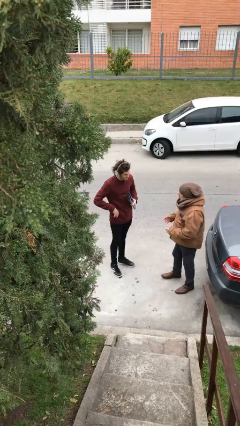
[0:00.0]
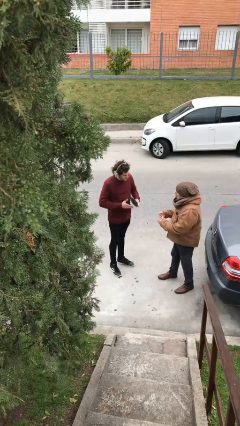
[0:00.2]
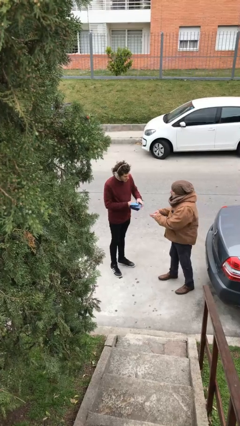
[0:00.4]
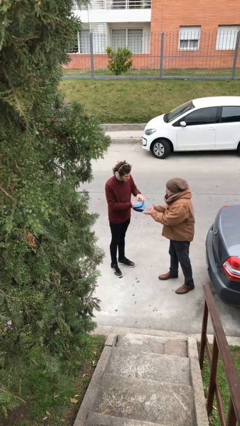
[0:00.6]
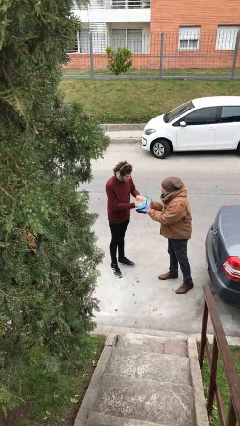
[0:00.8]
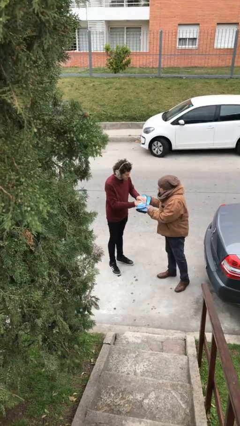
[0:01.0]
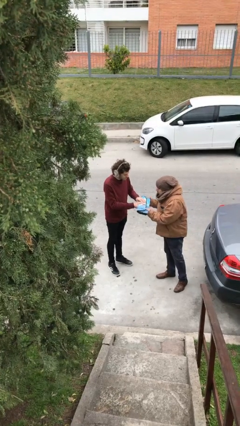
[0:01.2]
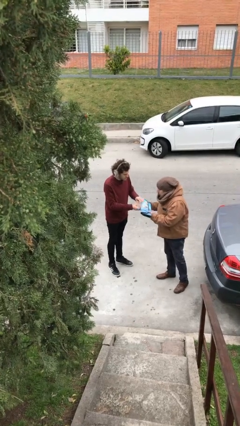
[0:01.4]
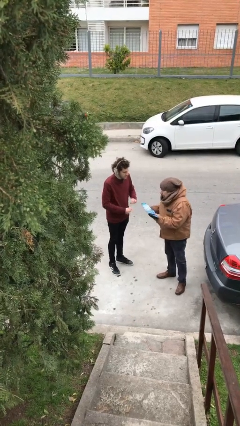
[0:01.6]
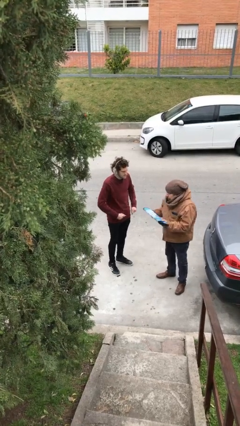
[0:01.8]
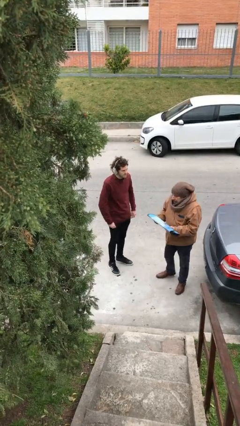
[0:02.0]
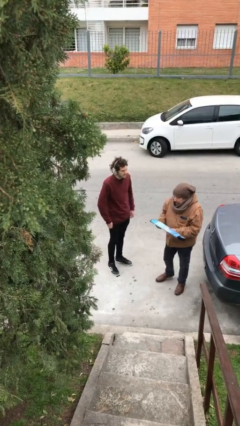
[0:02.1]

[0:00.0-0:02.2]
person transfers object to person

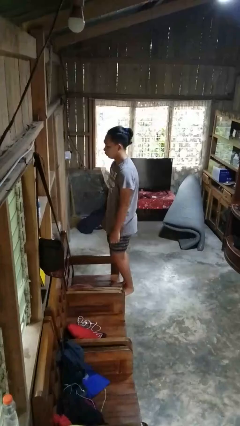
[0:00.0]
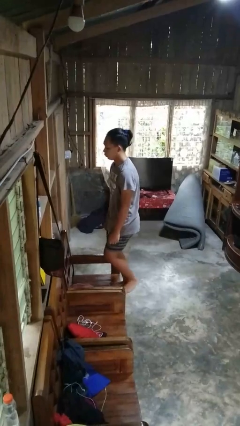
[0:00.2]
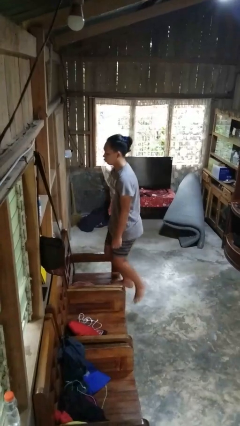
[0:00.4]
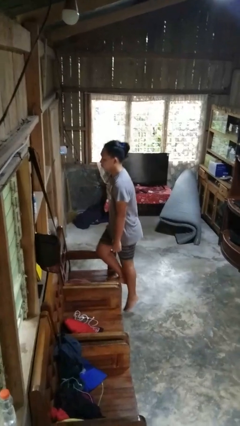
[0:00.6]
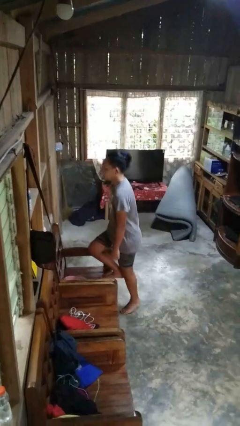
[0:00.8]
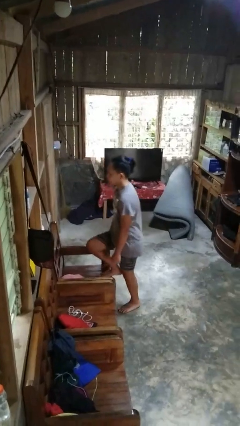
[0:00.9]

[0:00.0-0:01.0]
person climbs off chair

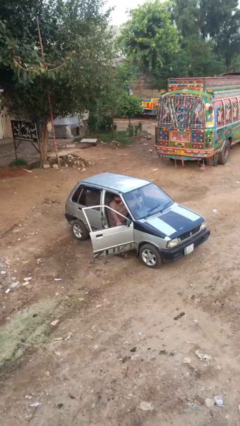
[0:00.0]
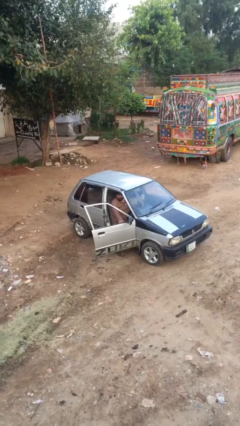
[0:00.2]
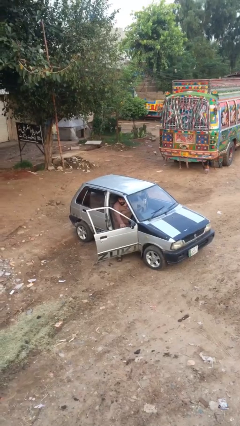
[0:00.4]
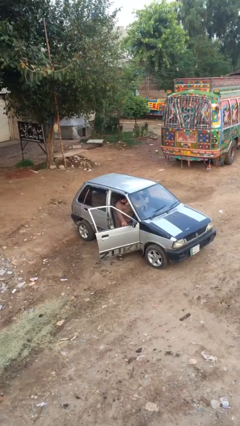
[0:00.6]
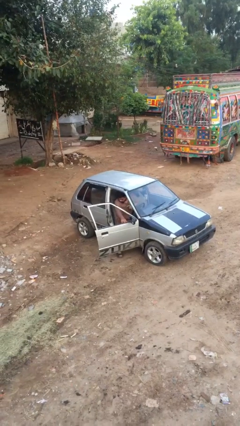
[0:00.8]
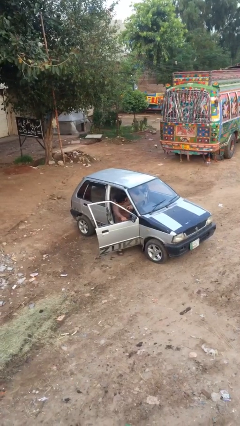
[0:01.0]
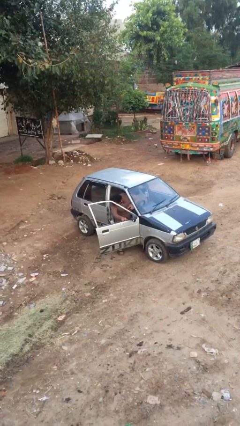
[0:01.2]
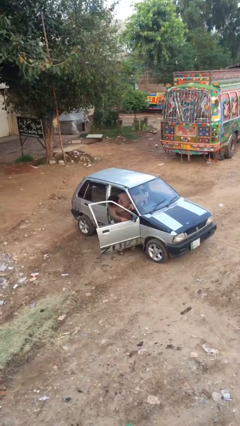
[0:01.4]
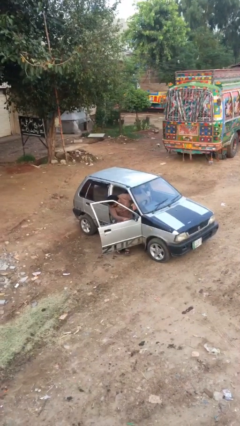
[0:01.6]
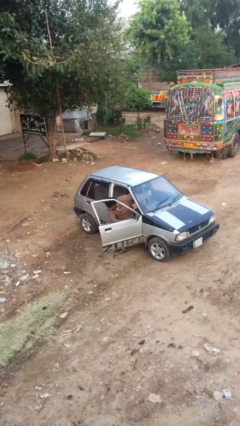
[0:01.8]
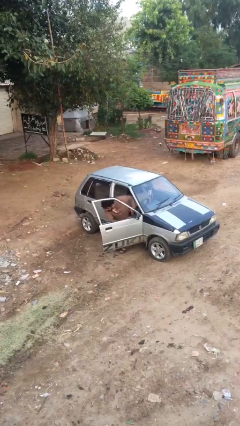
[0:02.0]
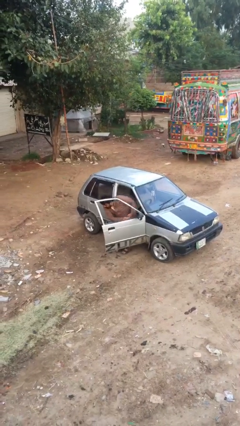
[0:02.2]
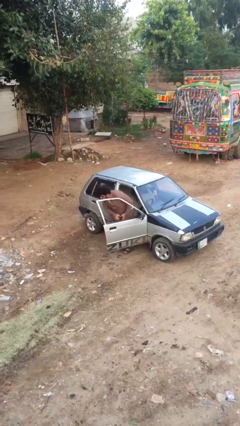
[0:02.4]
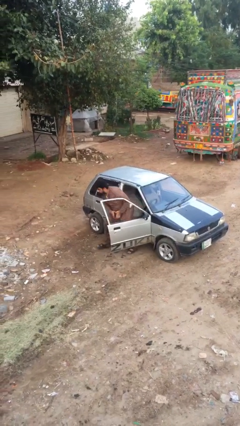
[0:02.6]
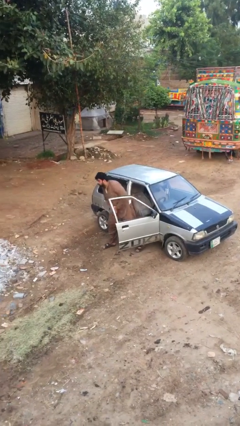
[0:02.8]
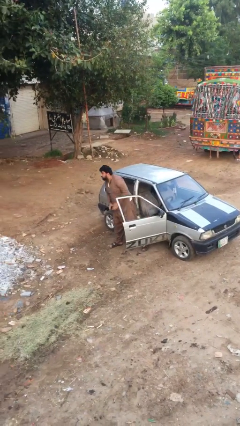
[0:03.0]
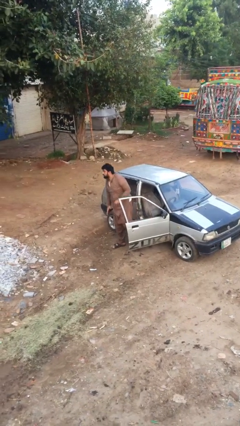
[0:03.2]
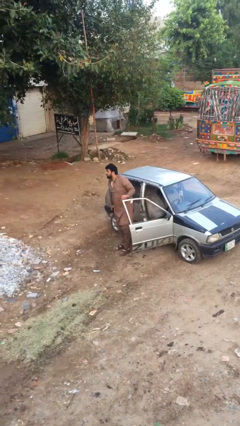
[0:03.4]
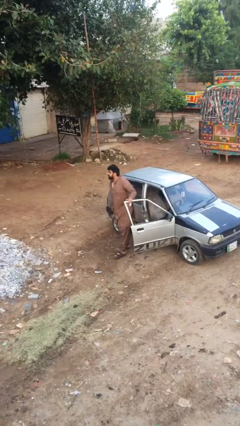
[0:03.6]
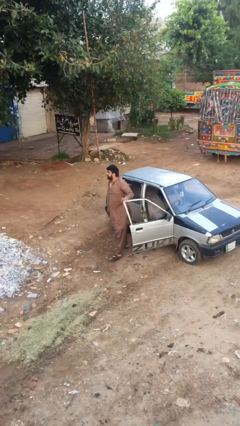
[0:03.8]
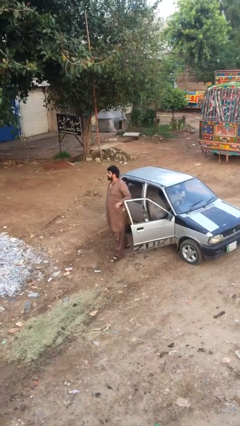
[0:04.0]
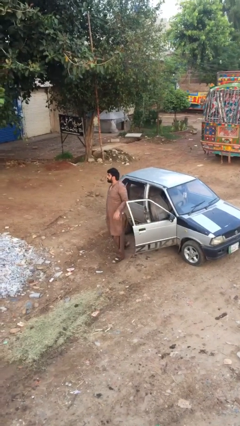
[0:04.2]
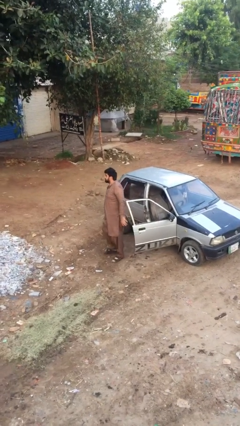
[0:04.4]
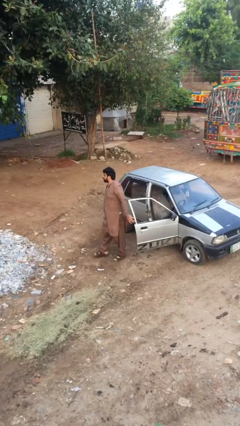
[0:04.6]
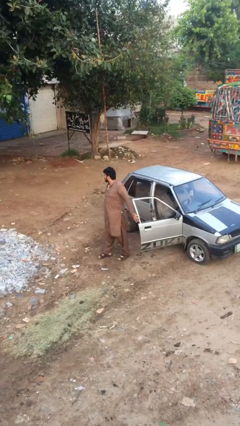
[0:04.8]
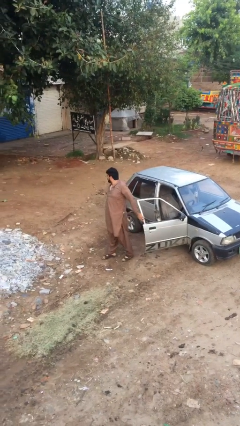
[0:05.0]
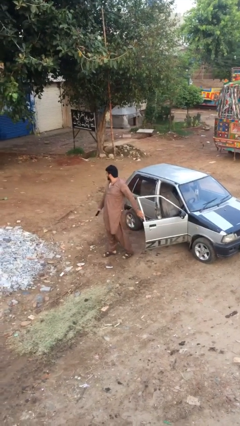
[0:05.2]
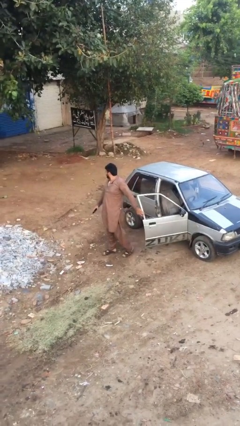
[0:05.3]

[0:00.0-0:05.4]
person exits car

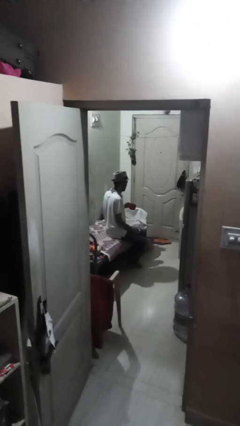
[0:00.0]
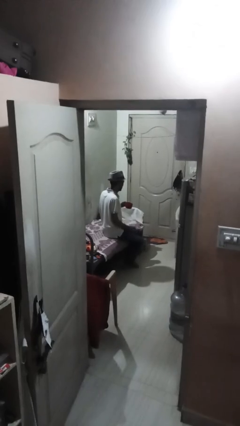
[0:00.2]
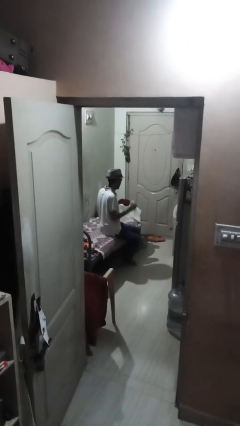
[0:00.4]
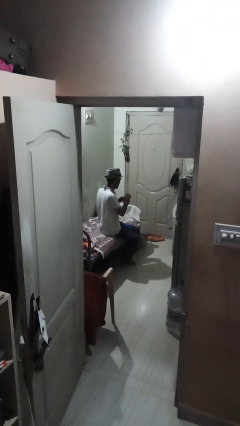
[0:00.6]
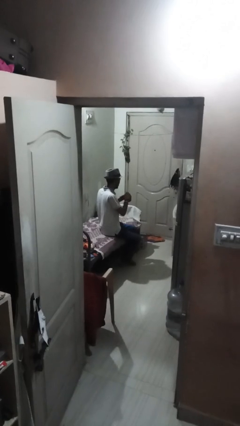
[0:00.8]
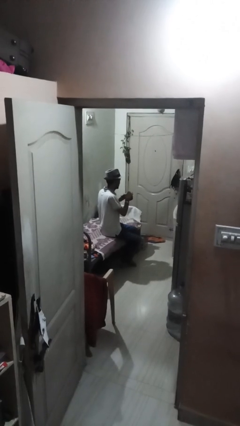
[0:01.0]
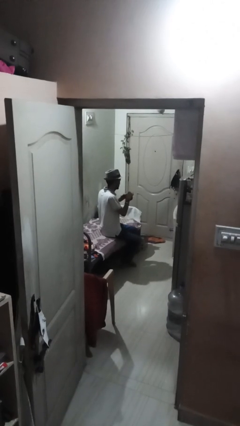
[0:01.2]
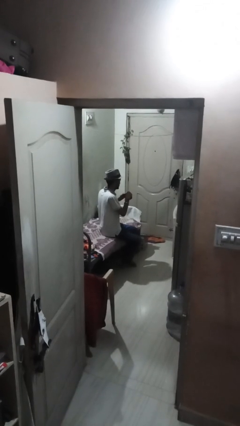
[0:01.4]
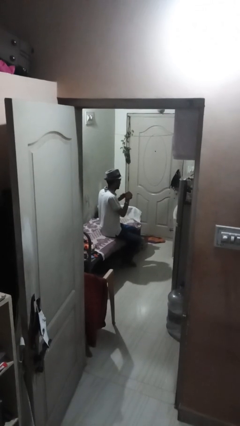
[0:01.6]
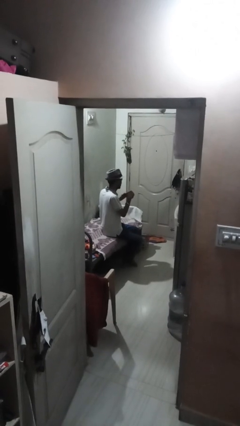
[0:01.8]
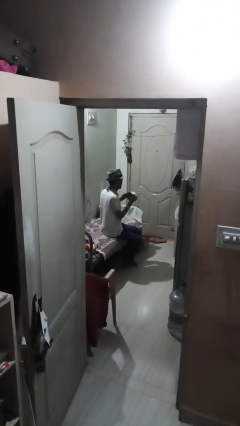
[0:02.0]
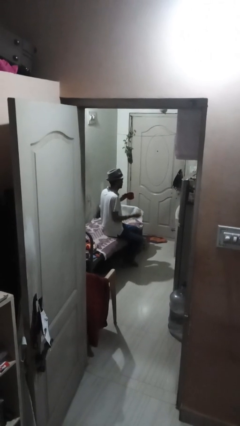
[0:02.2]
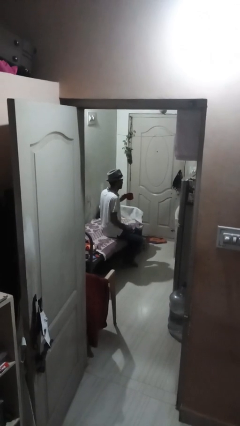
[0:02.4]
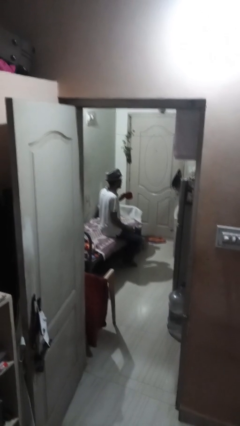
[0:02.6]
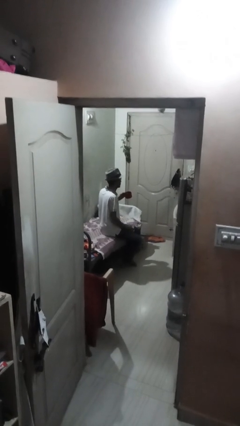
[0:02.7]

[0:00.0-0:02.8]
person stirs mug

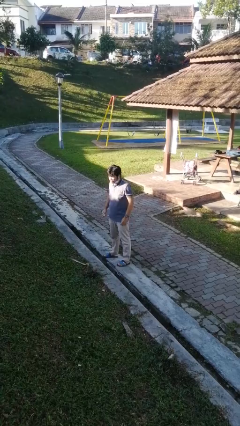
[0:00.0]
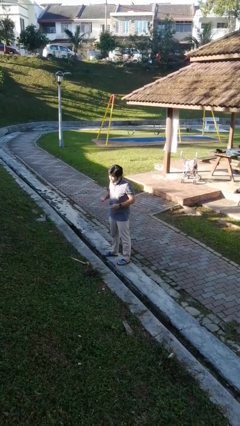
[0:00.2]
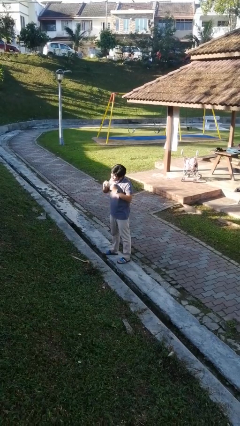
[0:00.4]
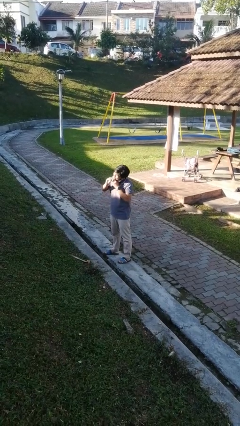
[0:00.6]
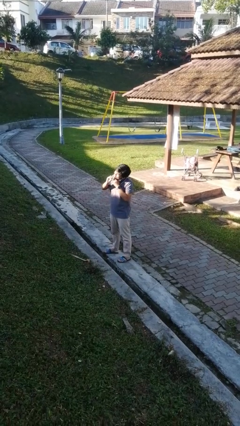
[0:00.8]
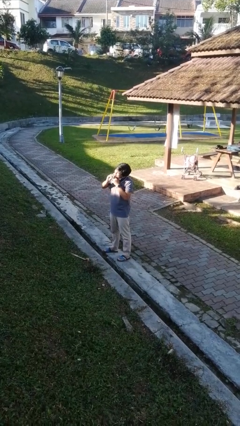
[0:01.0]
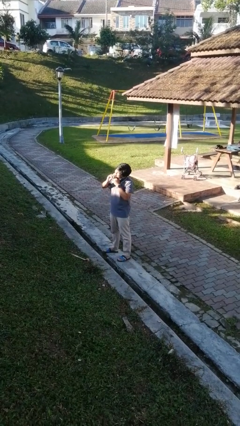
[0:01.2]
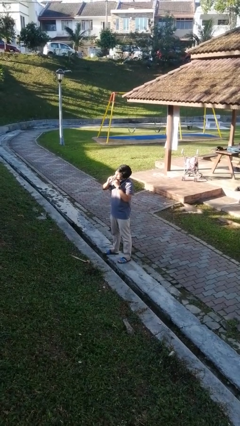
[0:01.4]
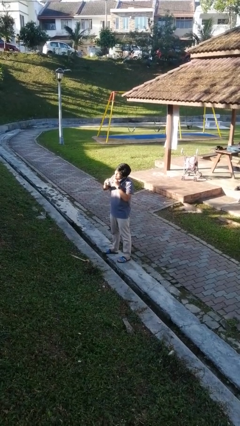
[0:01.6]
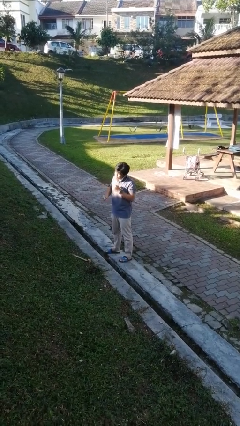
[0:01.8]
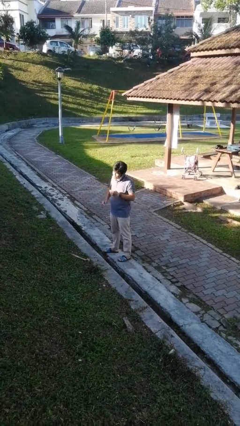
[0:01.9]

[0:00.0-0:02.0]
person flosses

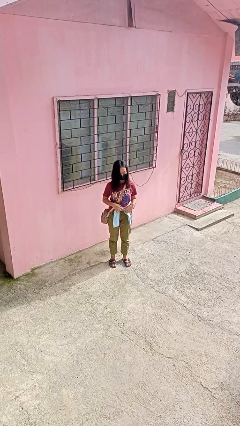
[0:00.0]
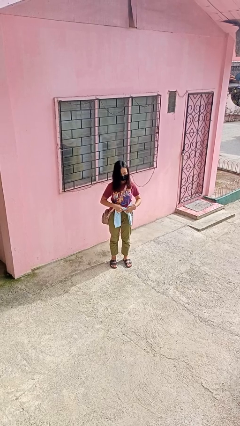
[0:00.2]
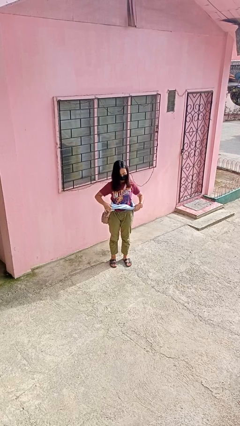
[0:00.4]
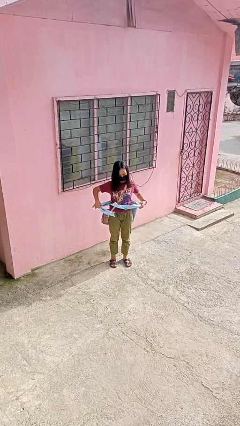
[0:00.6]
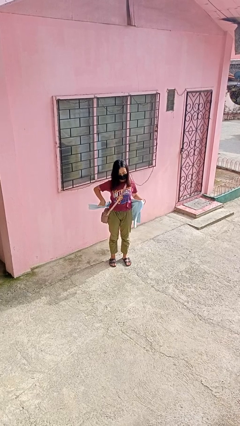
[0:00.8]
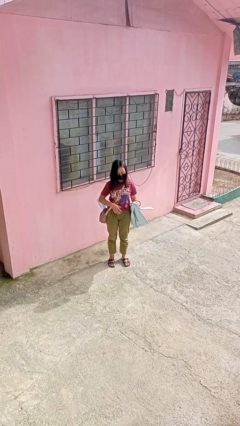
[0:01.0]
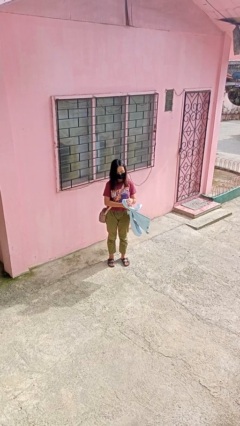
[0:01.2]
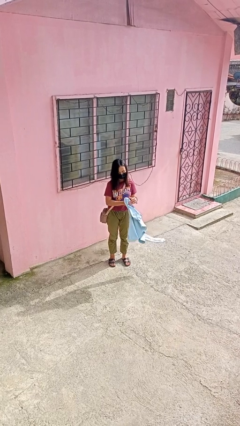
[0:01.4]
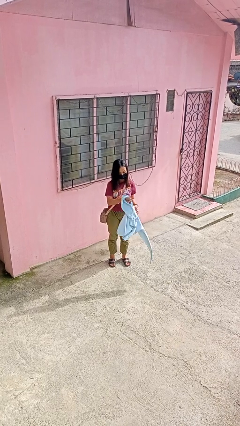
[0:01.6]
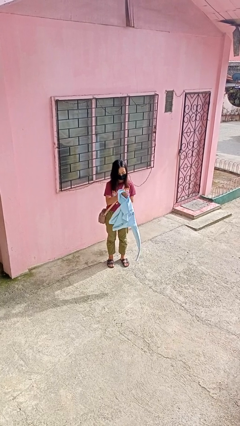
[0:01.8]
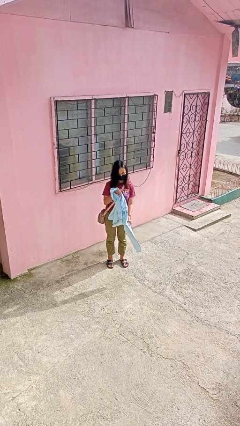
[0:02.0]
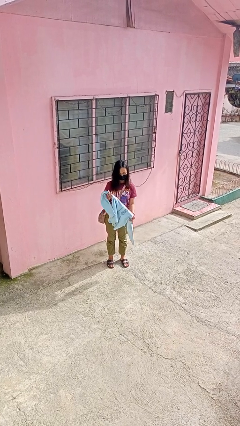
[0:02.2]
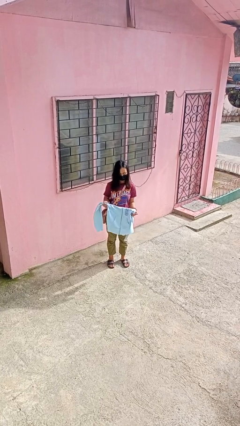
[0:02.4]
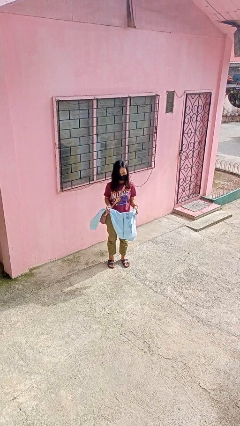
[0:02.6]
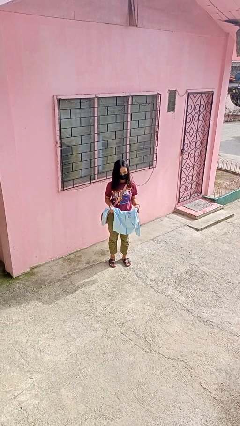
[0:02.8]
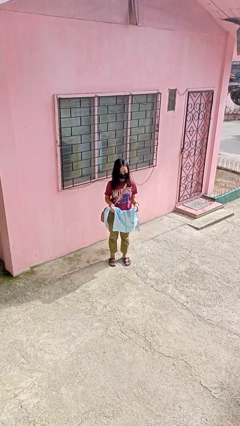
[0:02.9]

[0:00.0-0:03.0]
person unties jacket around waist

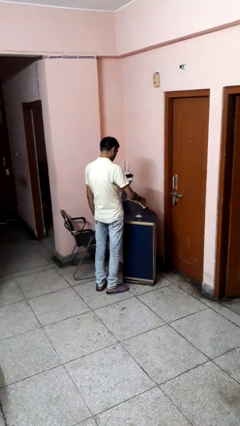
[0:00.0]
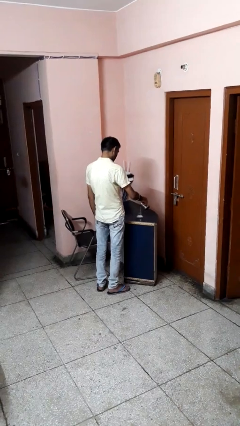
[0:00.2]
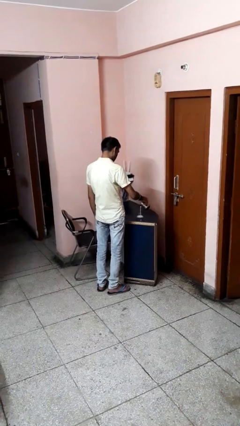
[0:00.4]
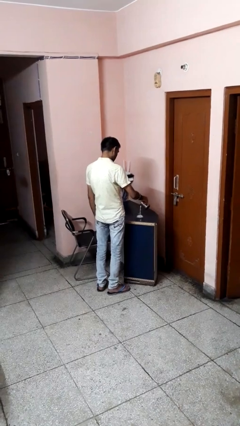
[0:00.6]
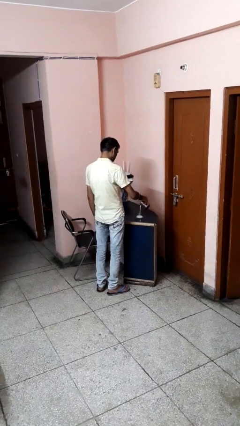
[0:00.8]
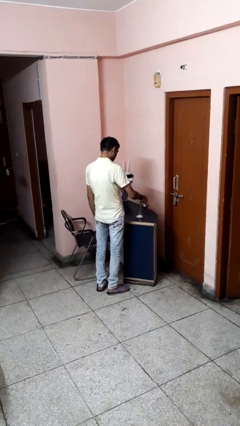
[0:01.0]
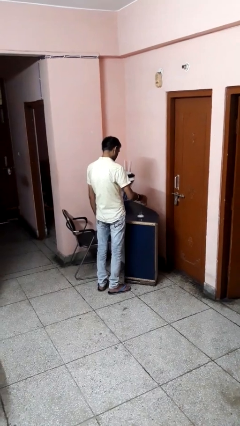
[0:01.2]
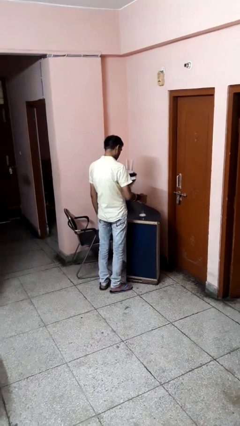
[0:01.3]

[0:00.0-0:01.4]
person pours into bowl
